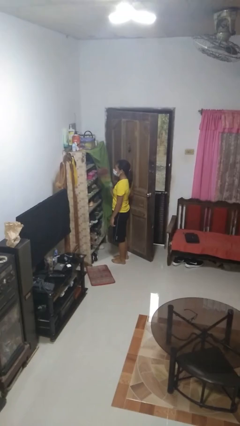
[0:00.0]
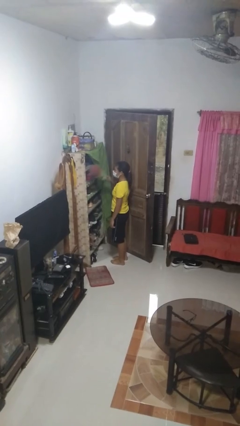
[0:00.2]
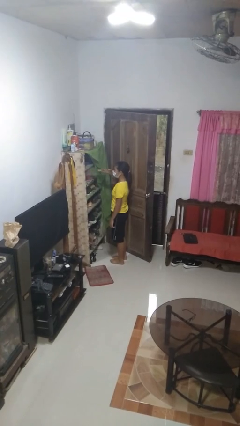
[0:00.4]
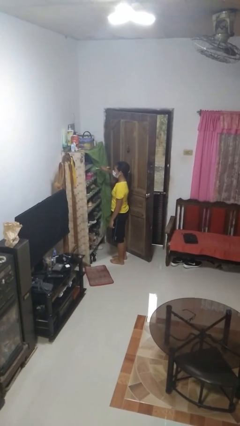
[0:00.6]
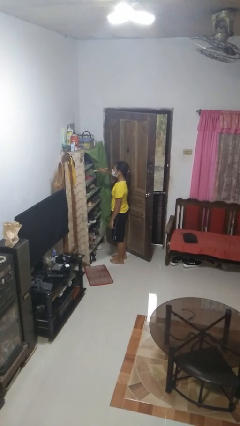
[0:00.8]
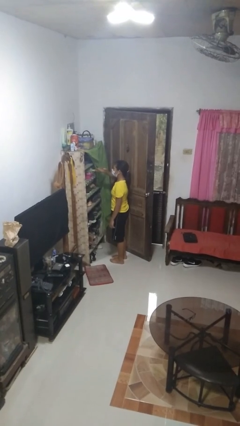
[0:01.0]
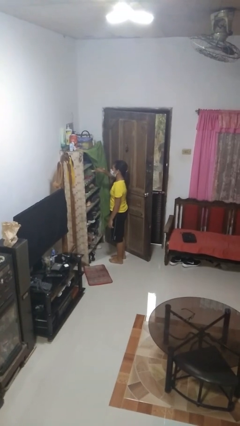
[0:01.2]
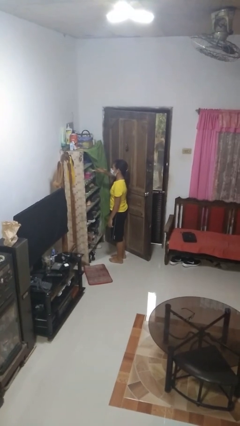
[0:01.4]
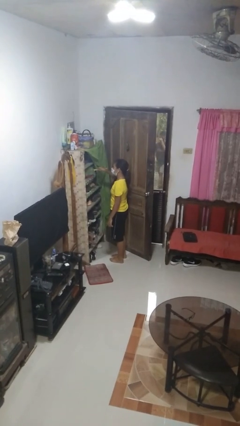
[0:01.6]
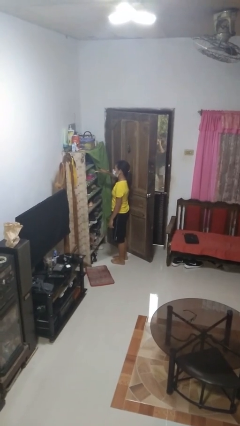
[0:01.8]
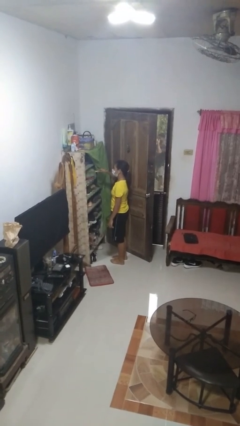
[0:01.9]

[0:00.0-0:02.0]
person dusts furniture

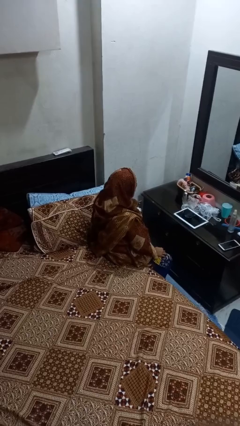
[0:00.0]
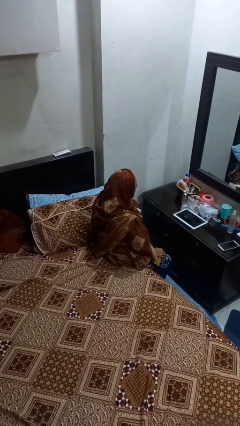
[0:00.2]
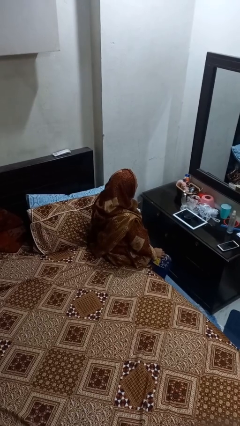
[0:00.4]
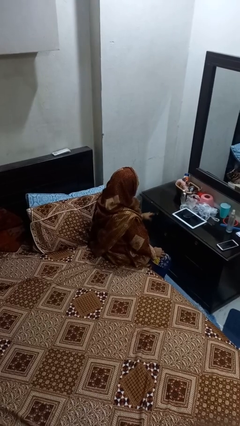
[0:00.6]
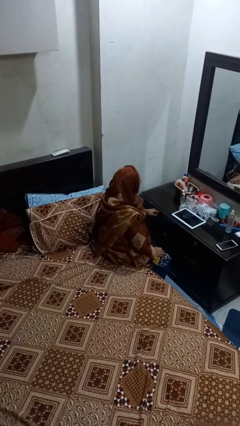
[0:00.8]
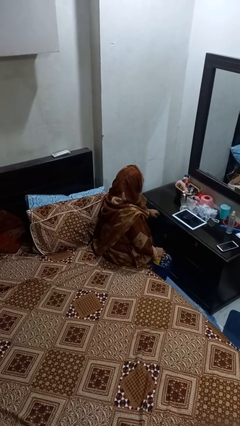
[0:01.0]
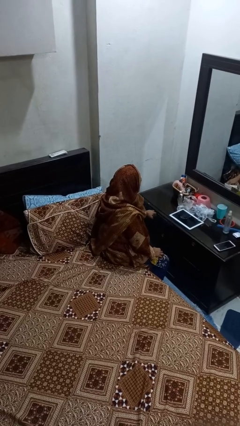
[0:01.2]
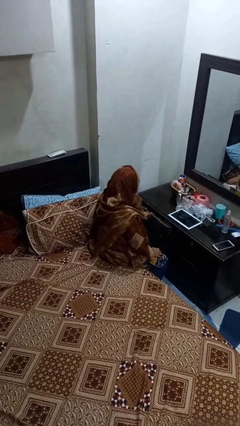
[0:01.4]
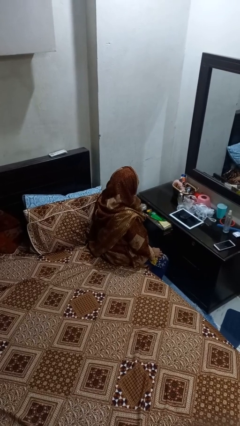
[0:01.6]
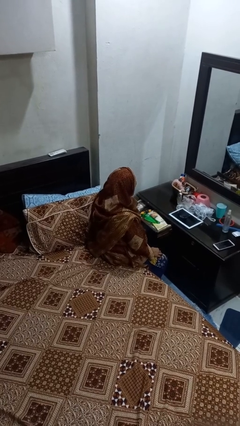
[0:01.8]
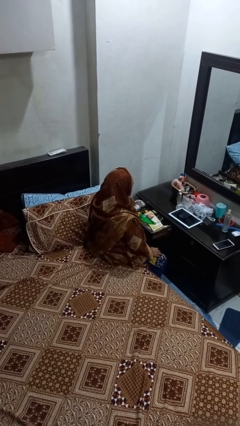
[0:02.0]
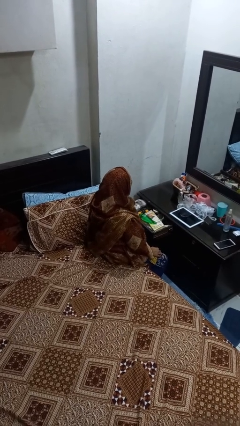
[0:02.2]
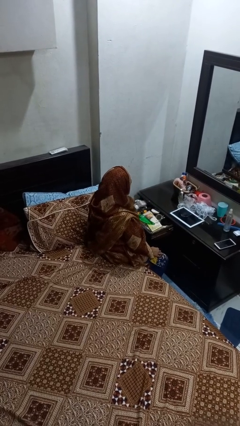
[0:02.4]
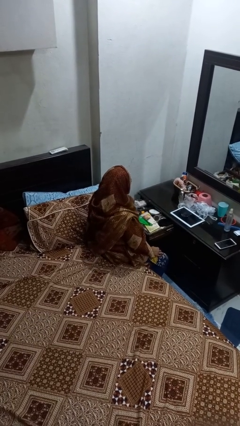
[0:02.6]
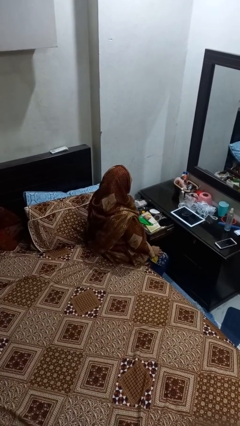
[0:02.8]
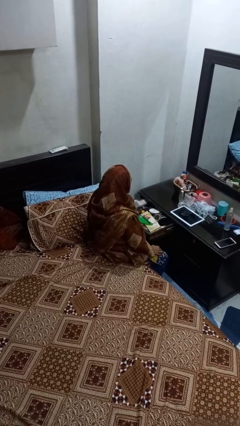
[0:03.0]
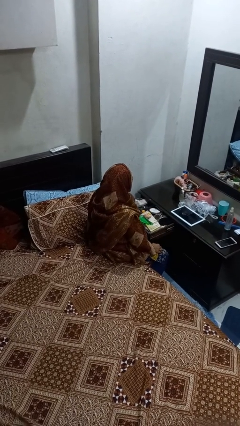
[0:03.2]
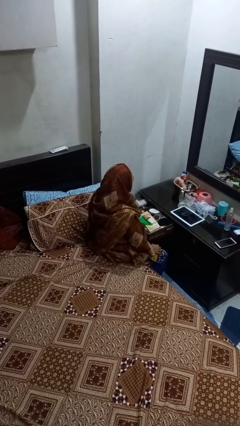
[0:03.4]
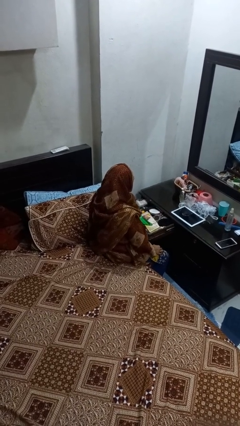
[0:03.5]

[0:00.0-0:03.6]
person opens dresser drawer

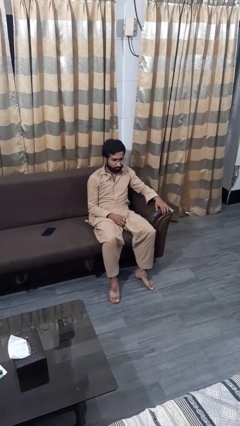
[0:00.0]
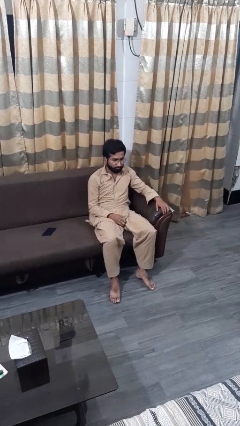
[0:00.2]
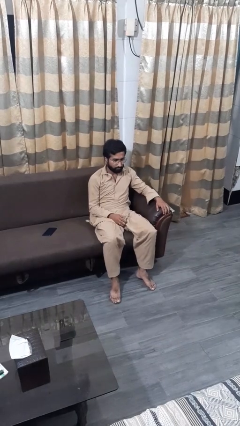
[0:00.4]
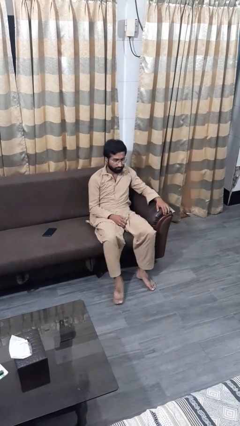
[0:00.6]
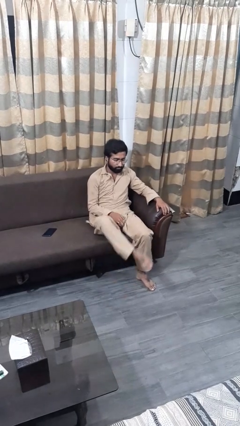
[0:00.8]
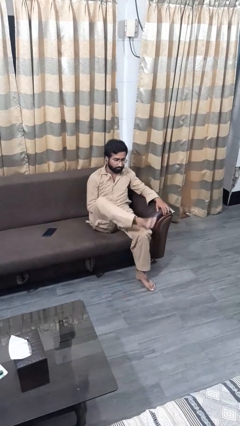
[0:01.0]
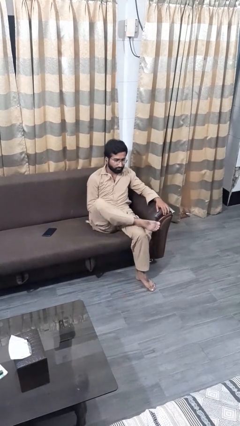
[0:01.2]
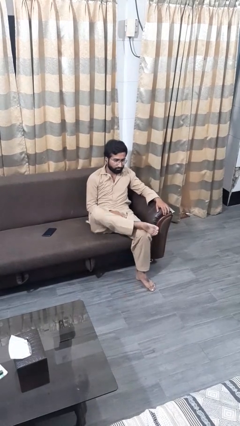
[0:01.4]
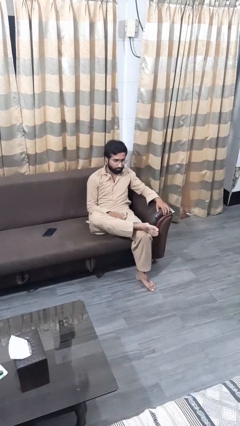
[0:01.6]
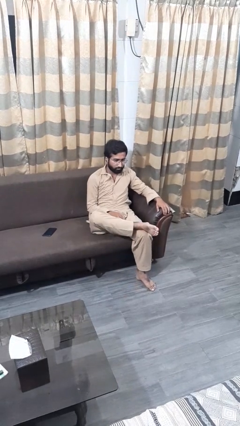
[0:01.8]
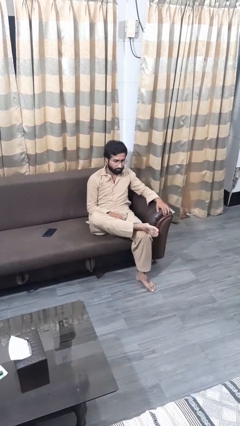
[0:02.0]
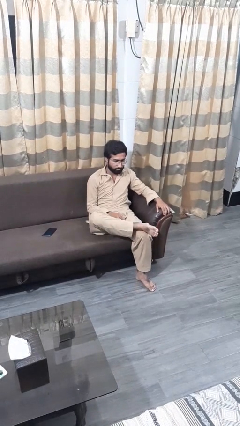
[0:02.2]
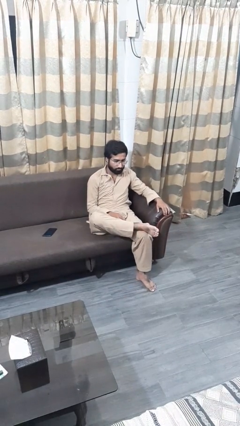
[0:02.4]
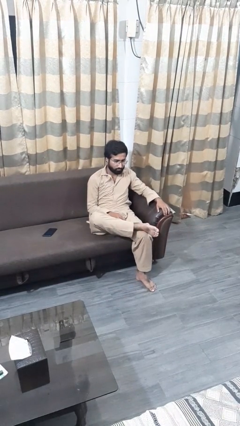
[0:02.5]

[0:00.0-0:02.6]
person crosses legs

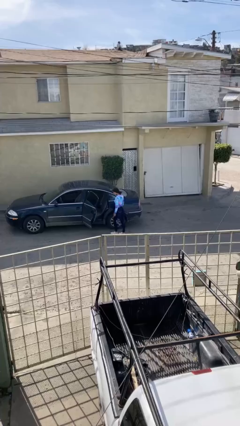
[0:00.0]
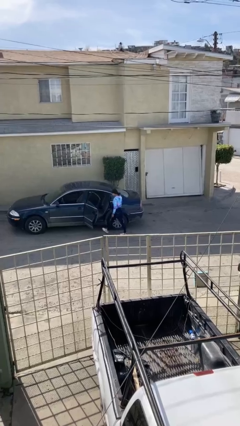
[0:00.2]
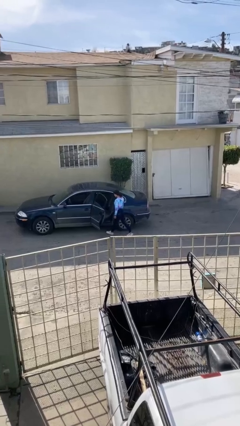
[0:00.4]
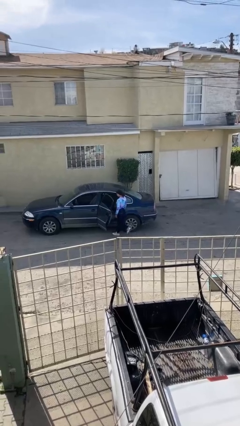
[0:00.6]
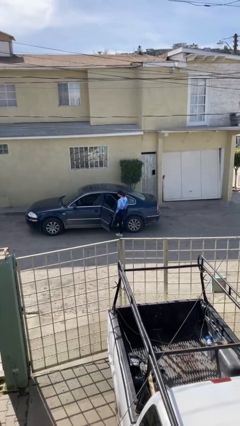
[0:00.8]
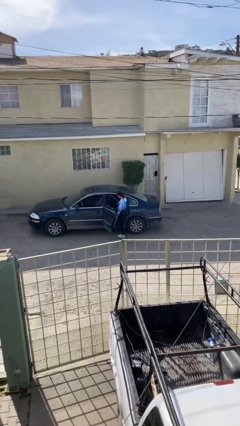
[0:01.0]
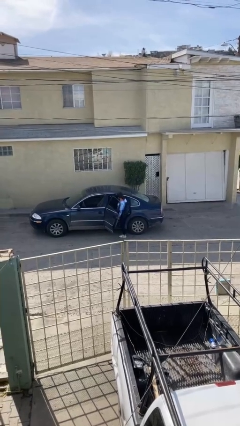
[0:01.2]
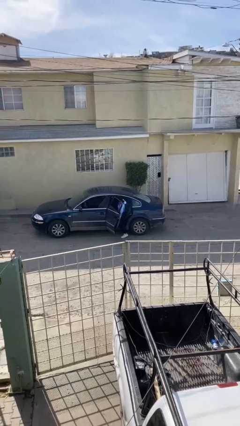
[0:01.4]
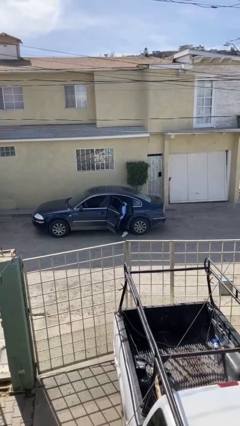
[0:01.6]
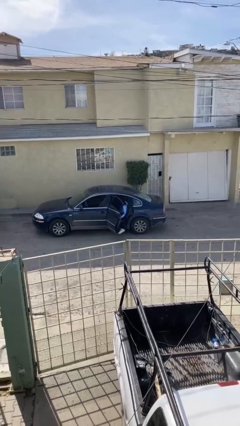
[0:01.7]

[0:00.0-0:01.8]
person enters car

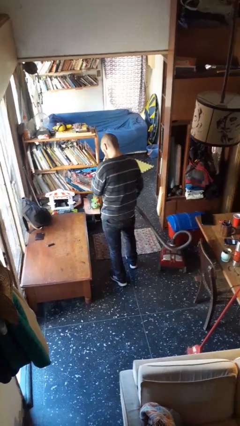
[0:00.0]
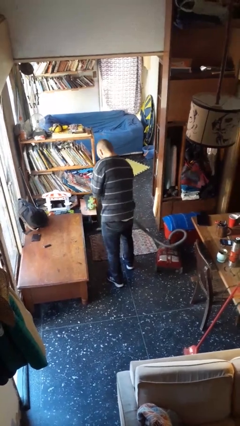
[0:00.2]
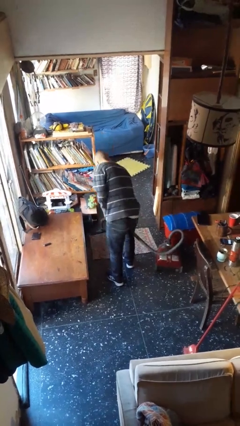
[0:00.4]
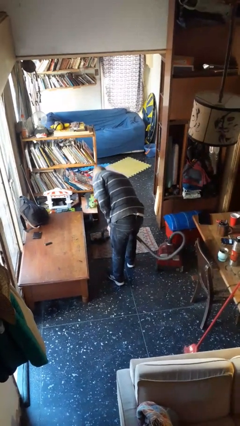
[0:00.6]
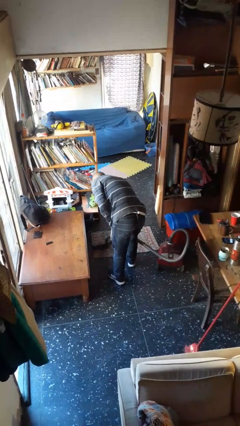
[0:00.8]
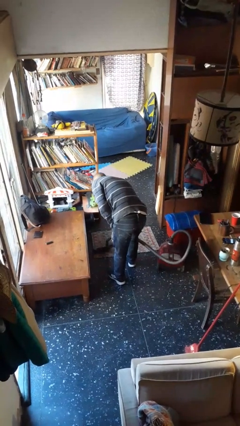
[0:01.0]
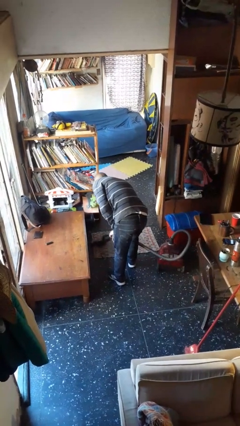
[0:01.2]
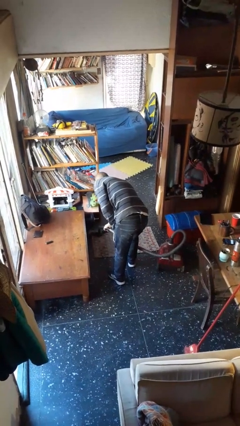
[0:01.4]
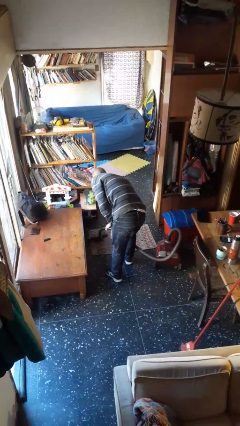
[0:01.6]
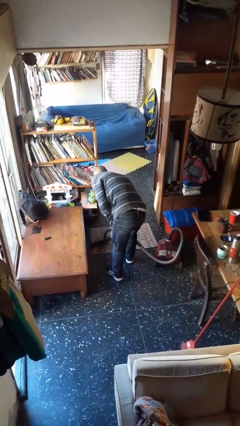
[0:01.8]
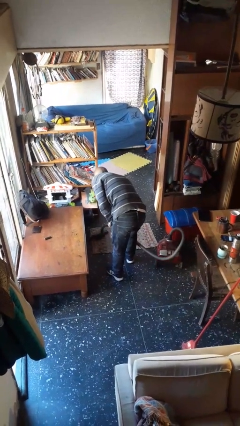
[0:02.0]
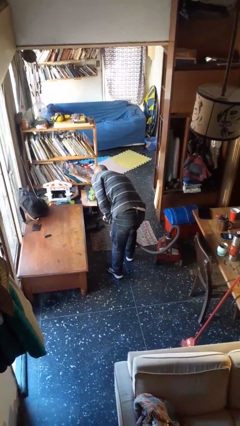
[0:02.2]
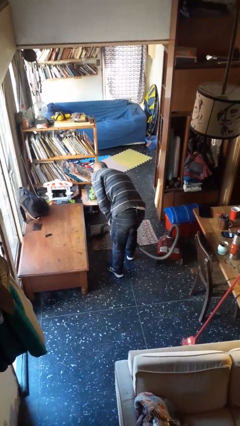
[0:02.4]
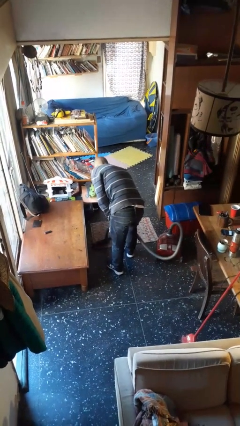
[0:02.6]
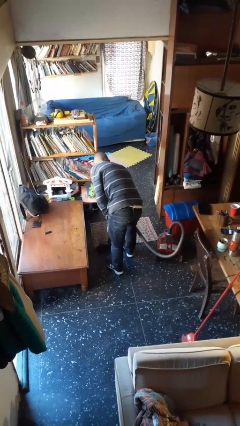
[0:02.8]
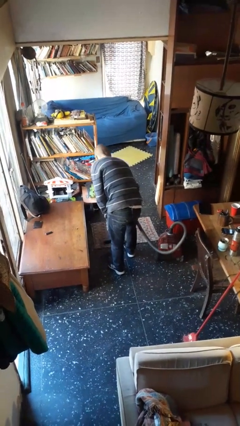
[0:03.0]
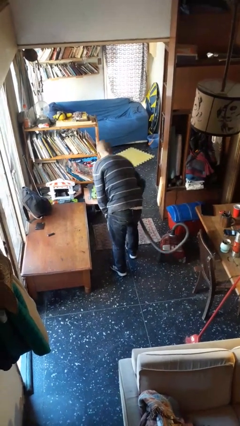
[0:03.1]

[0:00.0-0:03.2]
person vacuums carpet

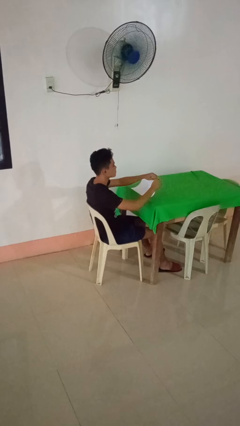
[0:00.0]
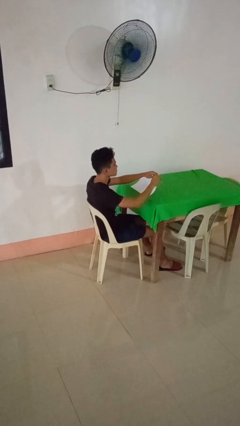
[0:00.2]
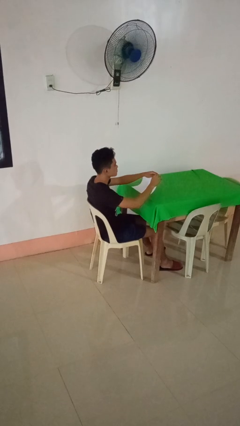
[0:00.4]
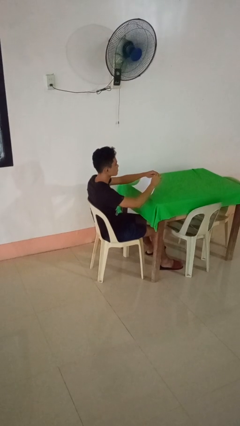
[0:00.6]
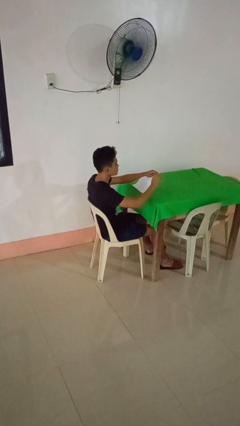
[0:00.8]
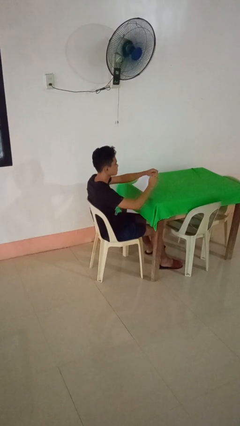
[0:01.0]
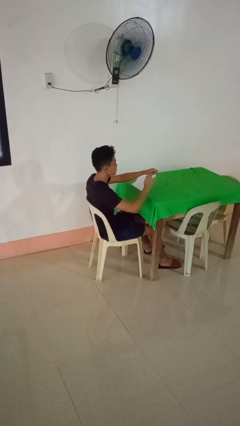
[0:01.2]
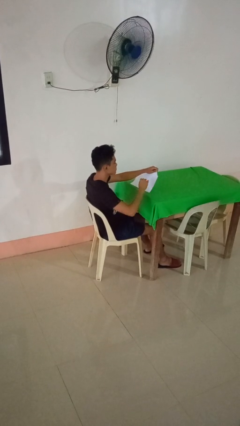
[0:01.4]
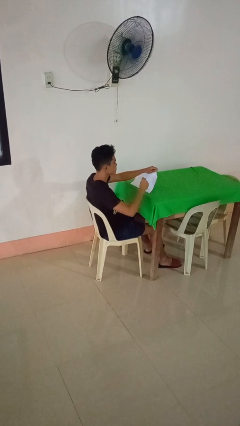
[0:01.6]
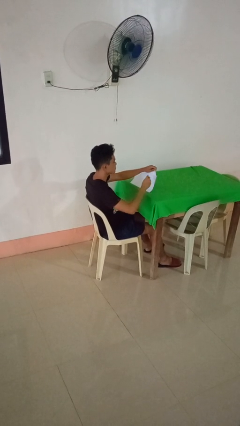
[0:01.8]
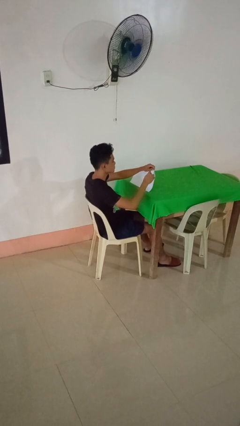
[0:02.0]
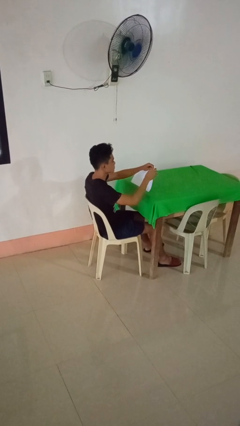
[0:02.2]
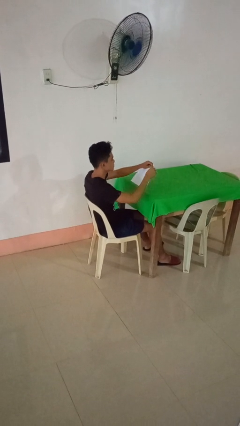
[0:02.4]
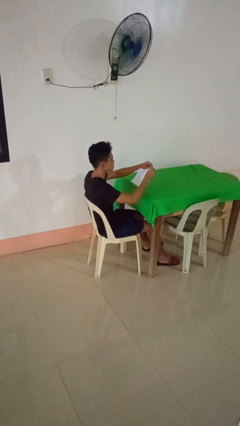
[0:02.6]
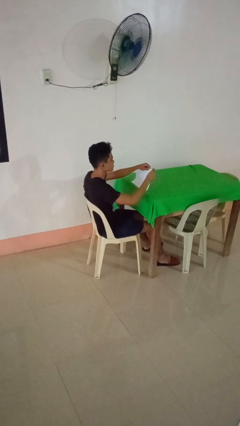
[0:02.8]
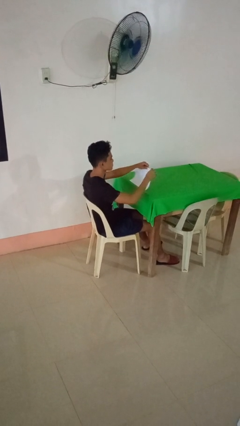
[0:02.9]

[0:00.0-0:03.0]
person tears paper

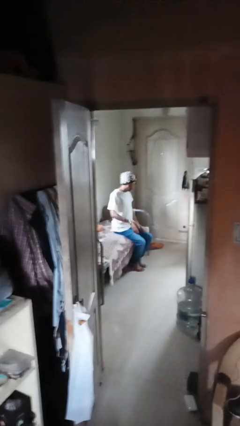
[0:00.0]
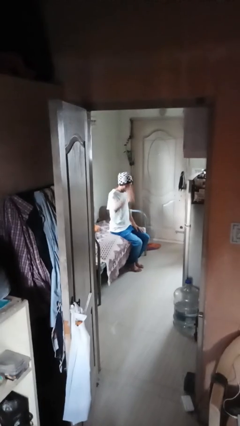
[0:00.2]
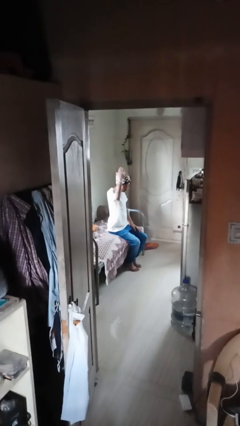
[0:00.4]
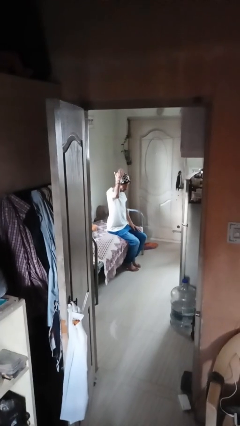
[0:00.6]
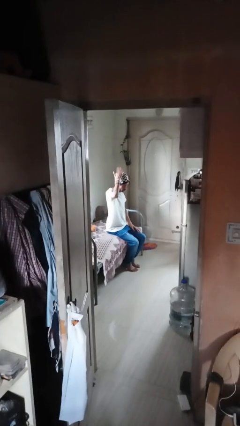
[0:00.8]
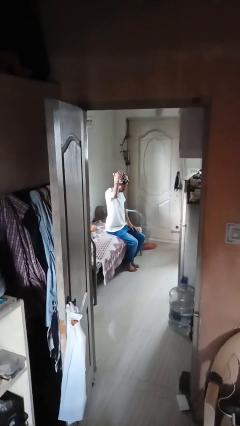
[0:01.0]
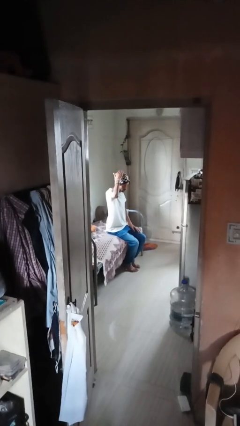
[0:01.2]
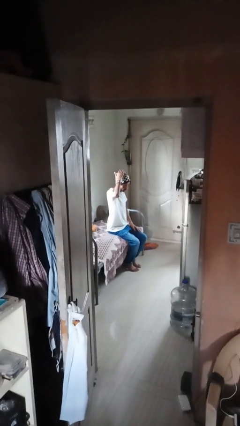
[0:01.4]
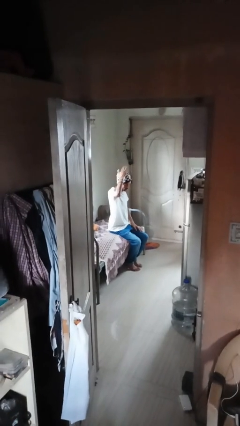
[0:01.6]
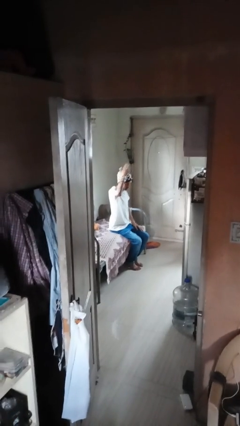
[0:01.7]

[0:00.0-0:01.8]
person pats head
